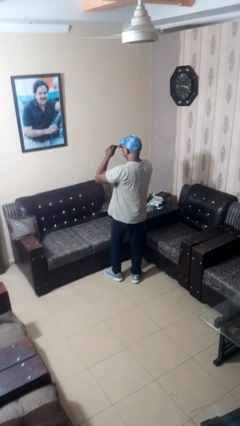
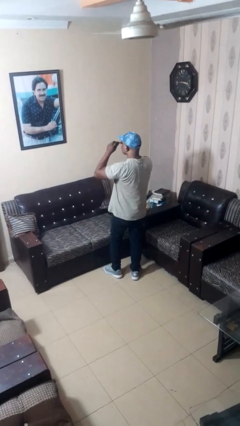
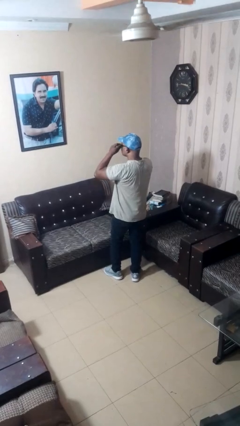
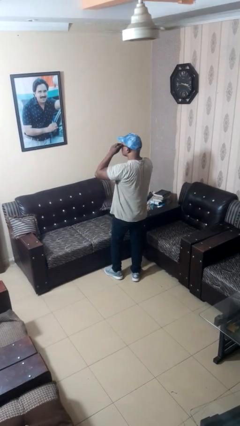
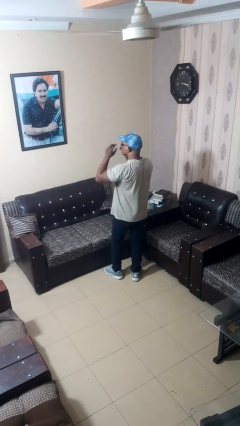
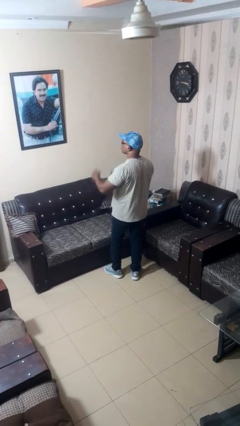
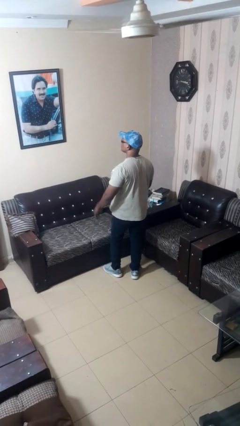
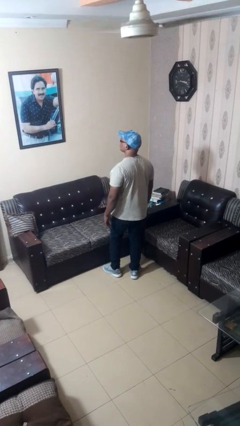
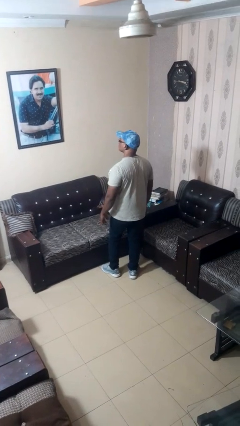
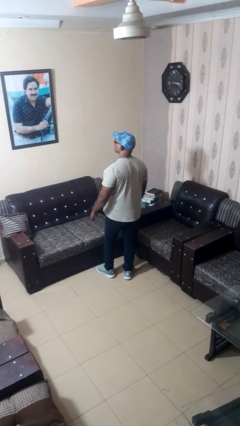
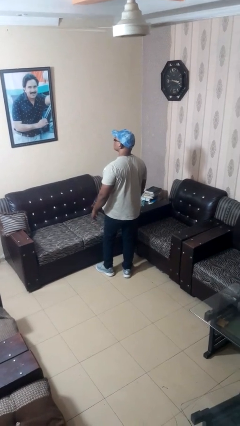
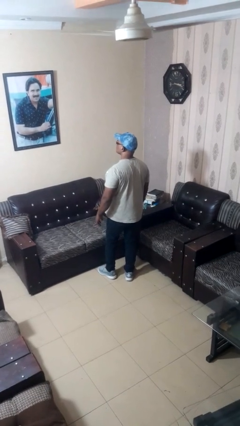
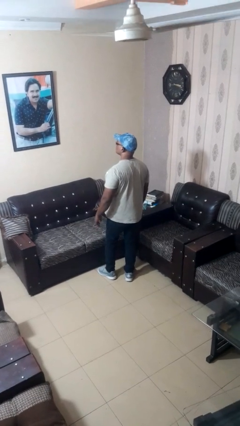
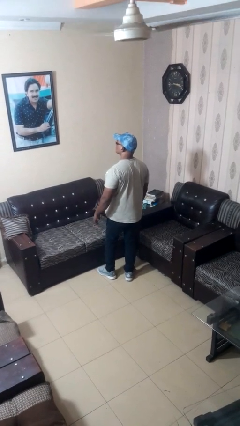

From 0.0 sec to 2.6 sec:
person puts on glasses

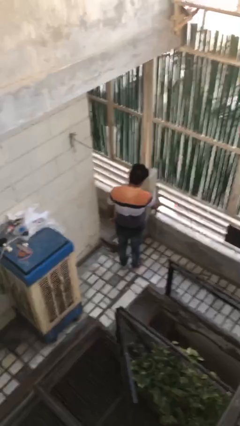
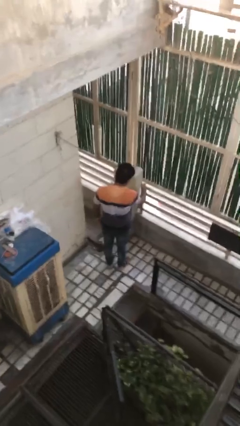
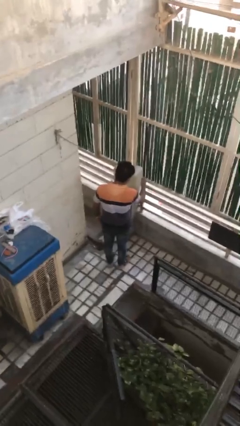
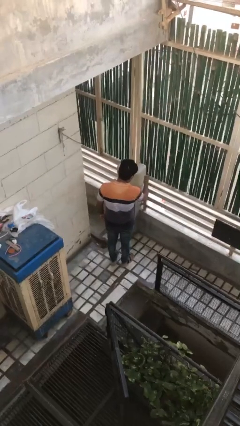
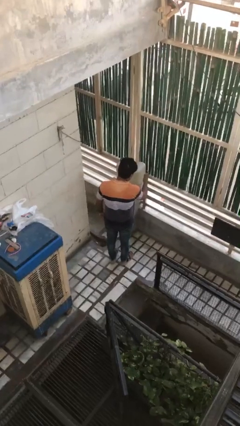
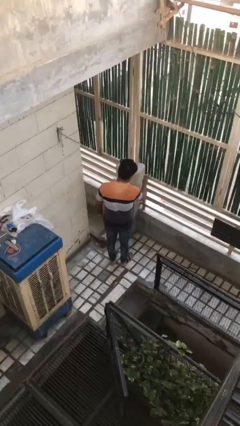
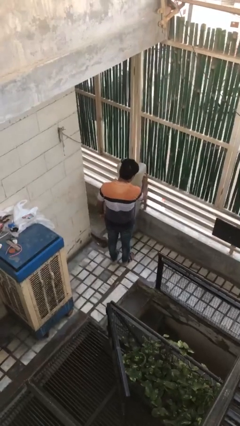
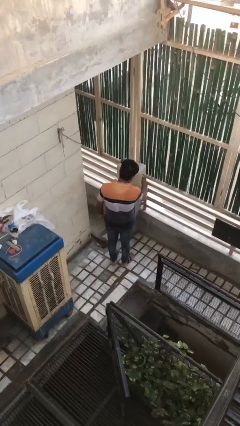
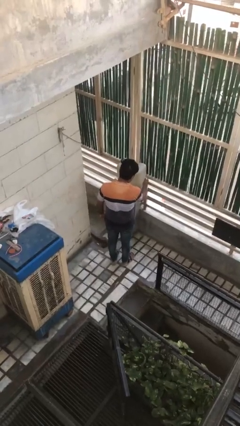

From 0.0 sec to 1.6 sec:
person taps object with finger

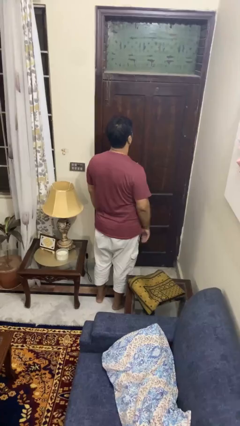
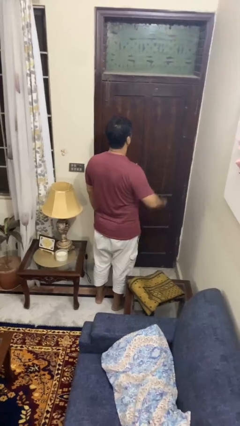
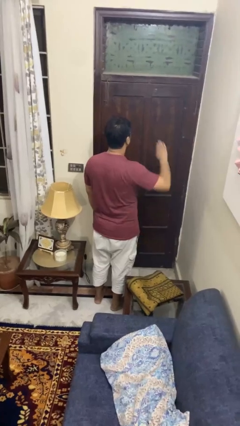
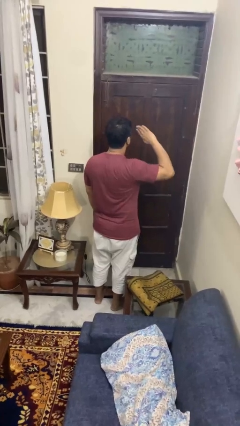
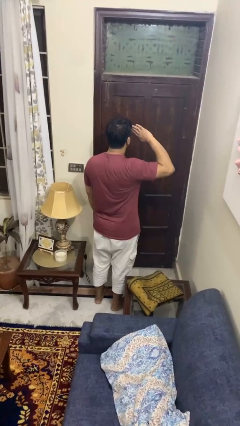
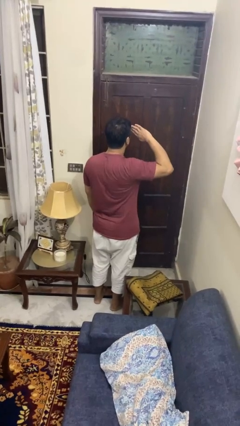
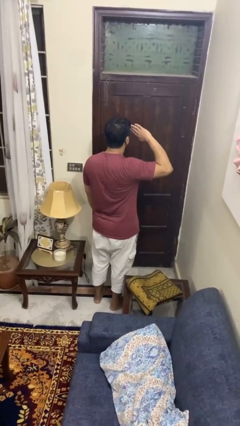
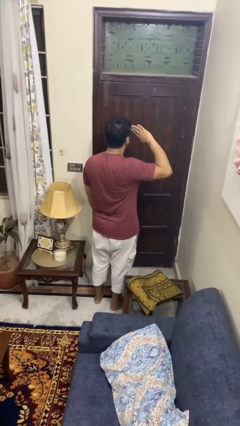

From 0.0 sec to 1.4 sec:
person salutes

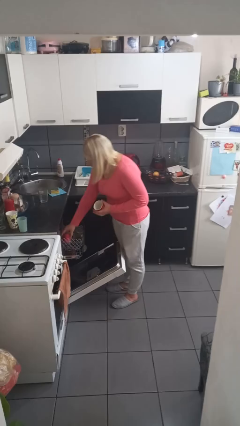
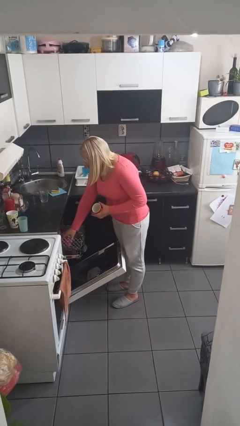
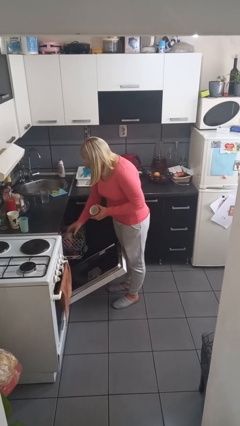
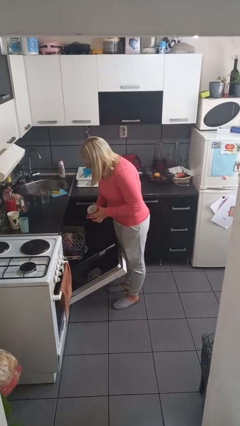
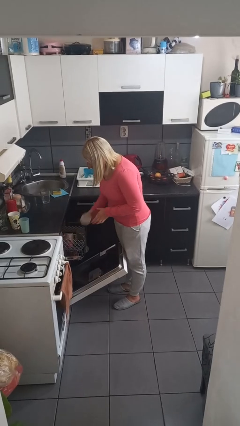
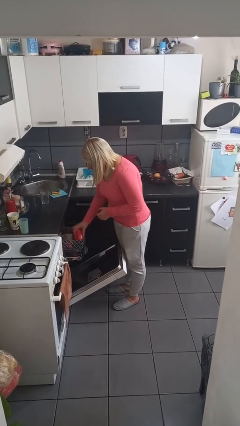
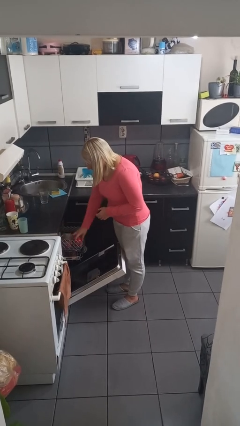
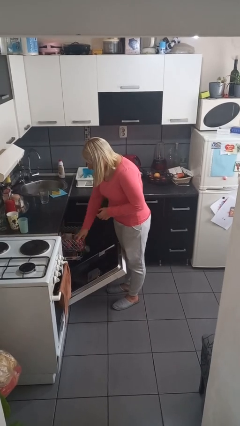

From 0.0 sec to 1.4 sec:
person loads dishwasher

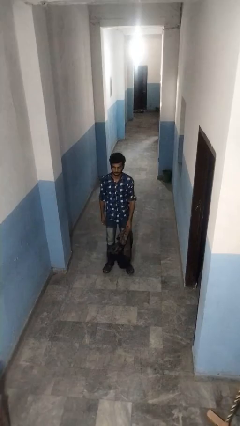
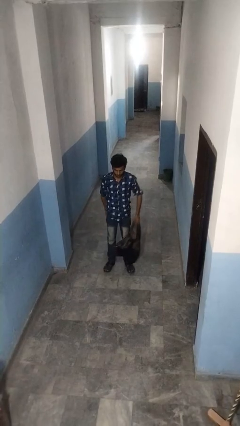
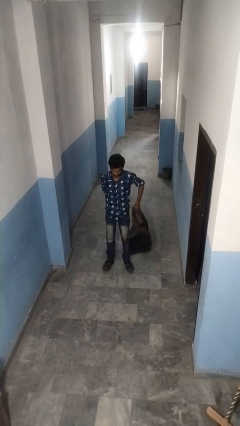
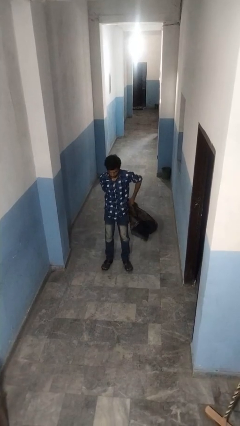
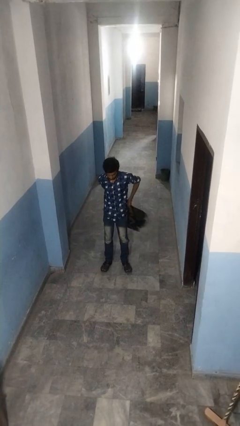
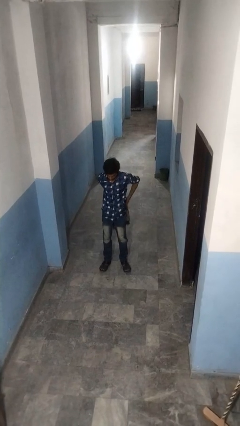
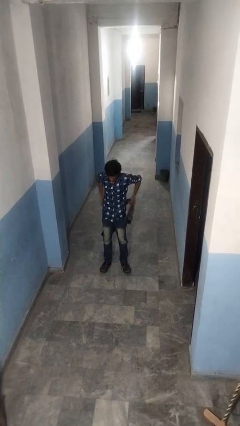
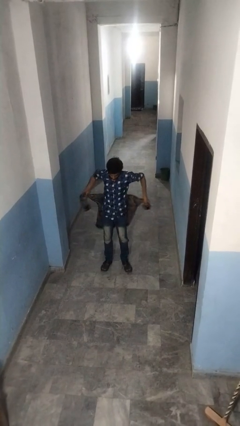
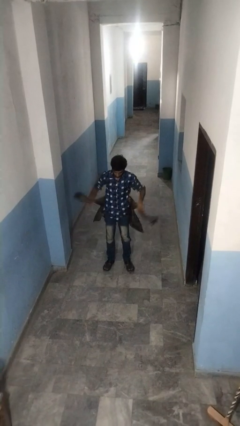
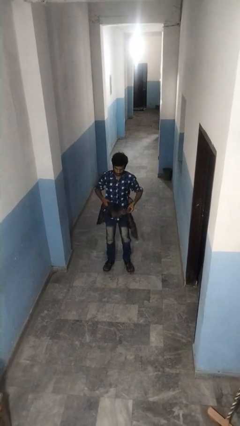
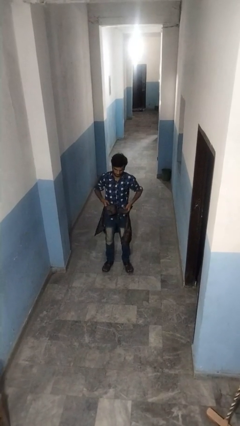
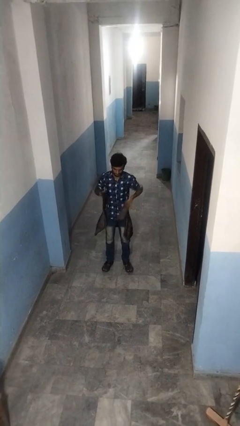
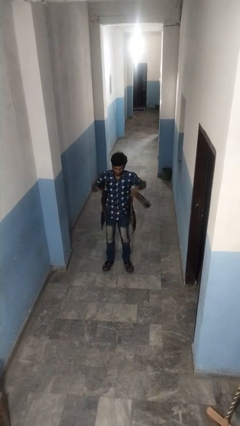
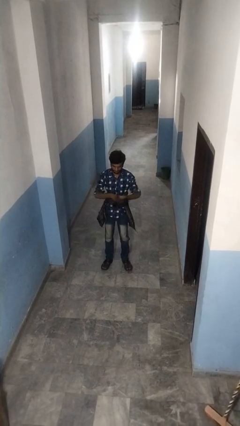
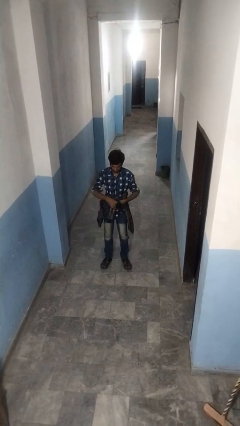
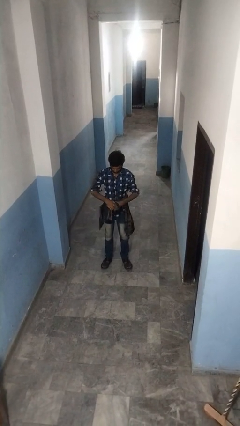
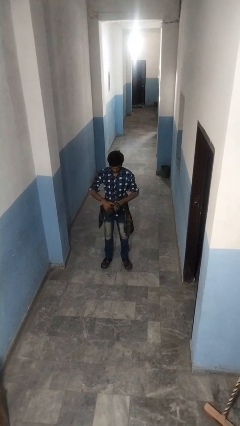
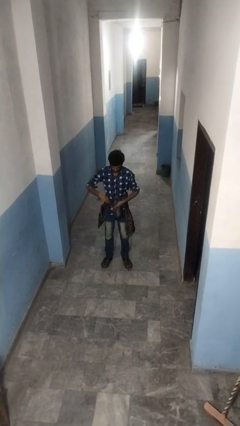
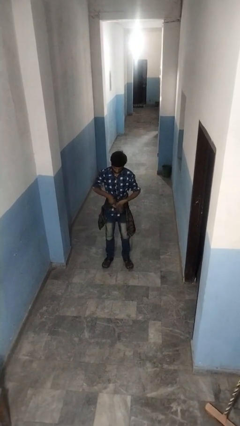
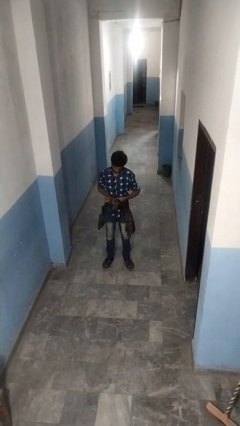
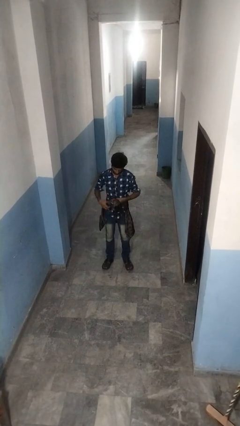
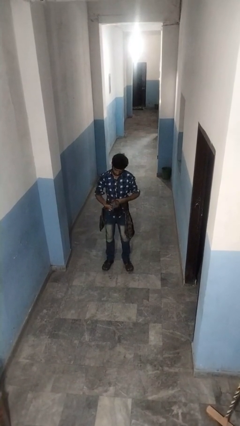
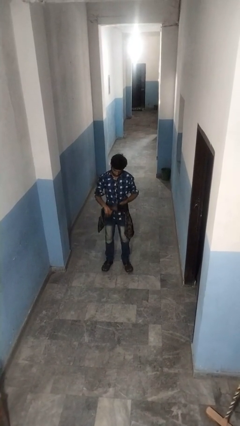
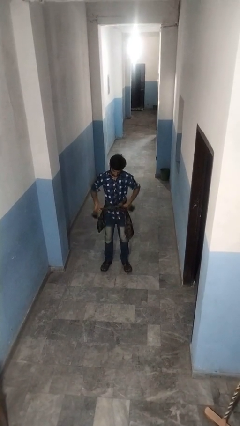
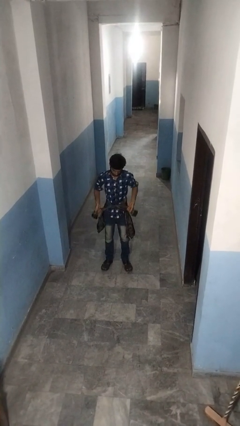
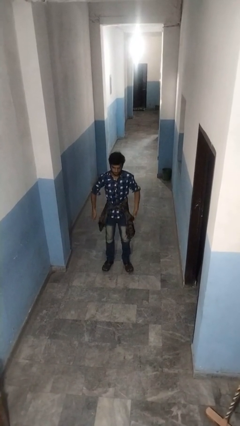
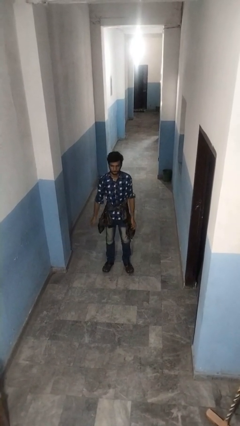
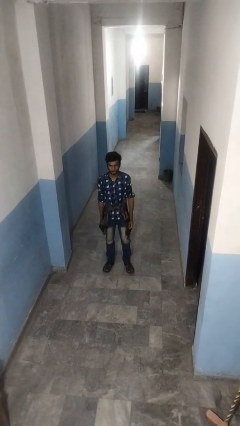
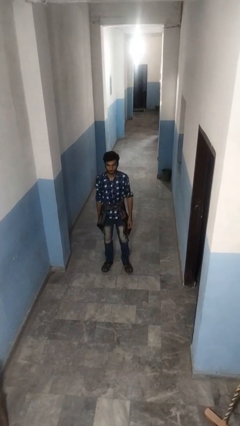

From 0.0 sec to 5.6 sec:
person ties jacket around waist

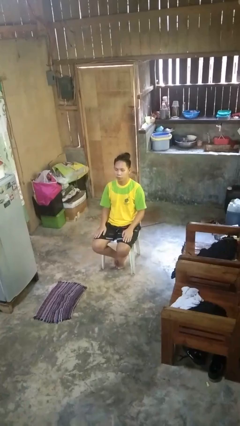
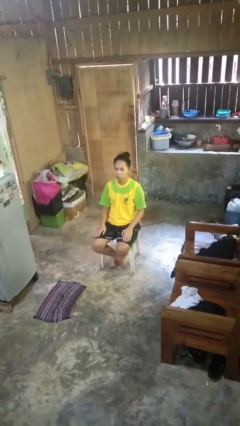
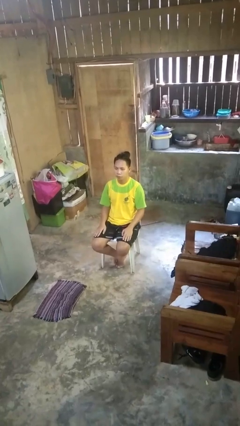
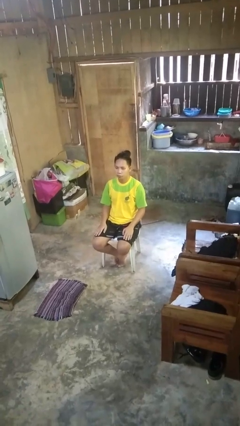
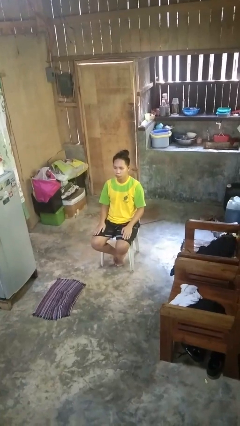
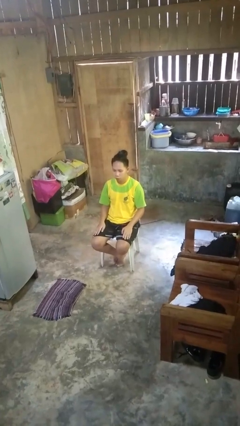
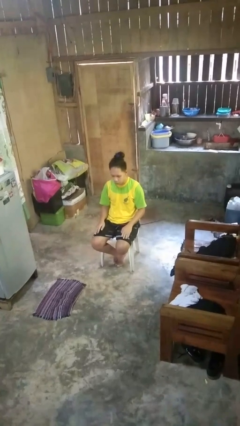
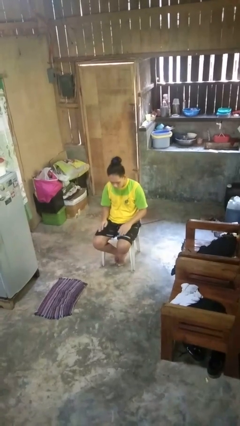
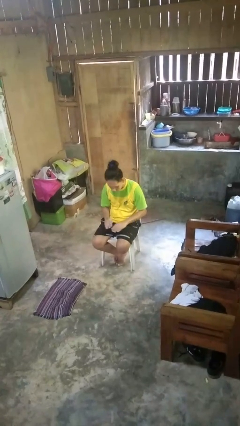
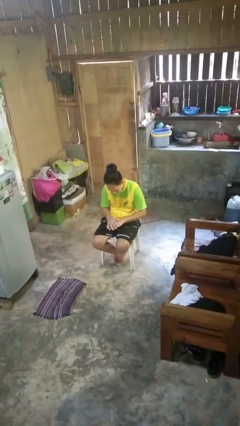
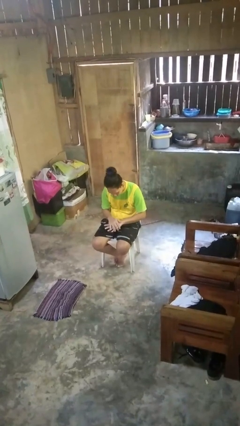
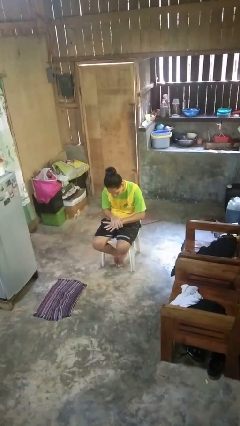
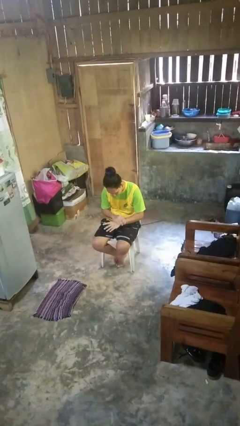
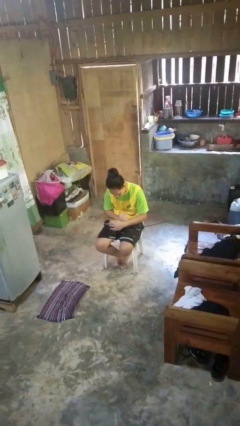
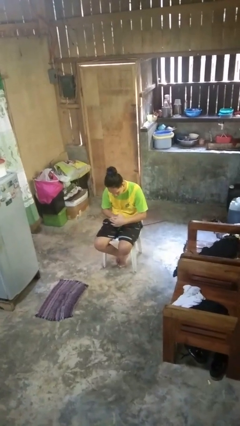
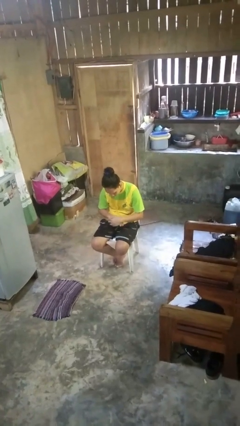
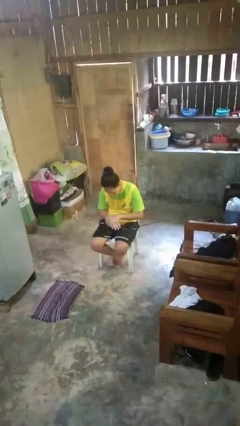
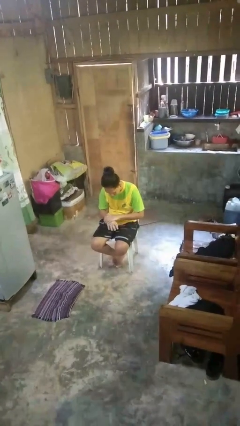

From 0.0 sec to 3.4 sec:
person looks at hands in lap

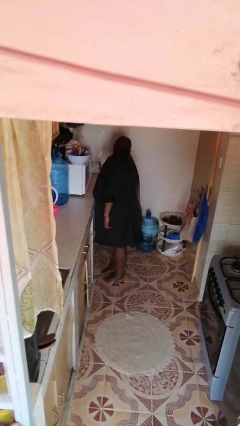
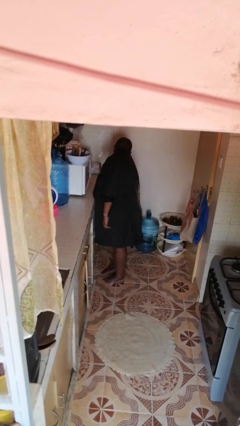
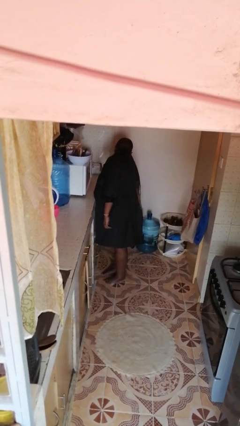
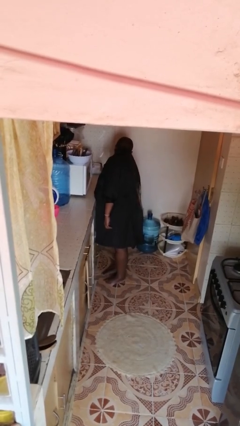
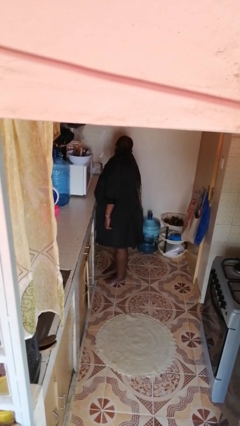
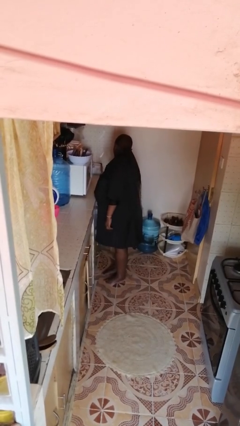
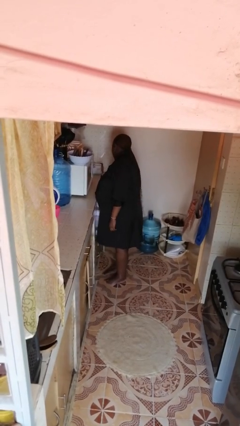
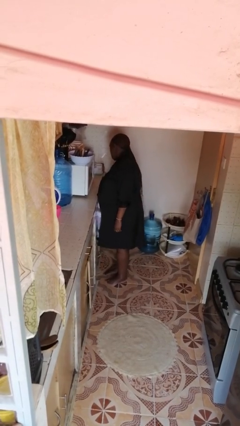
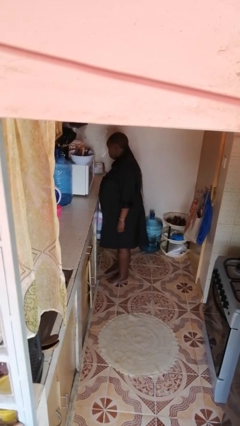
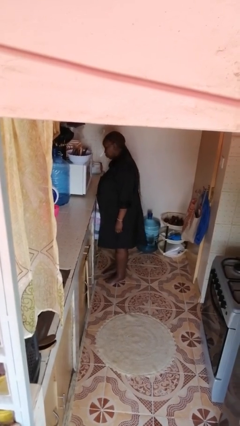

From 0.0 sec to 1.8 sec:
person closes cabinet
